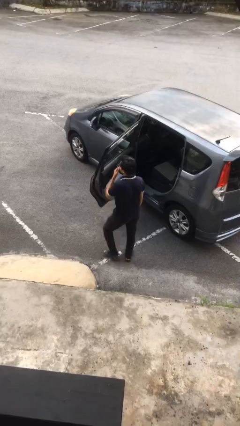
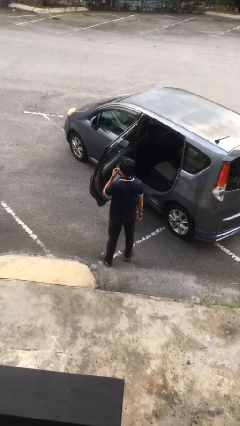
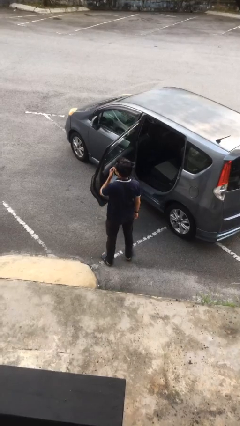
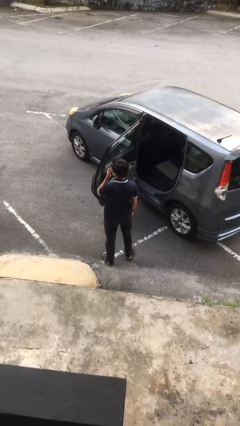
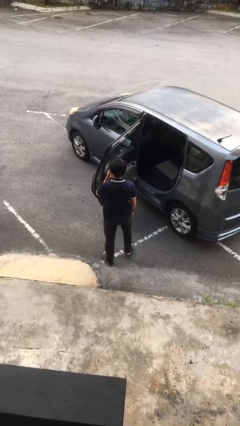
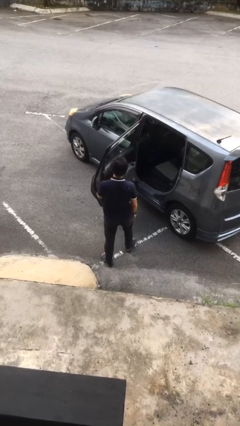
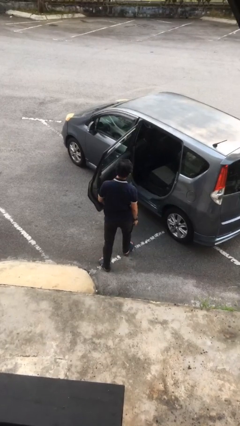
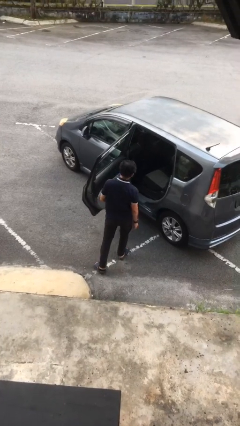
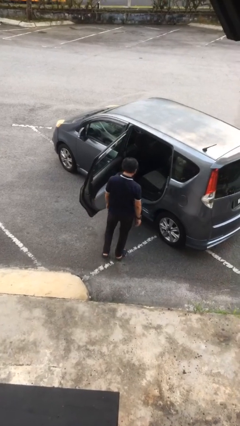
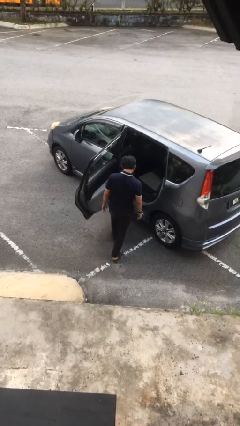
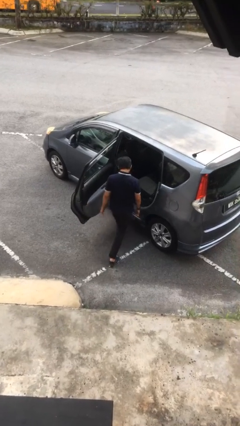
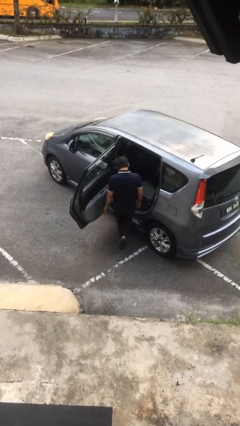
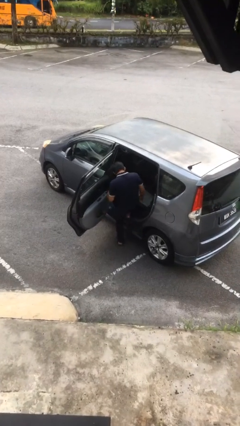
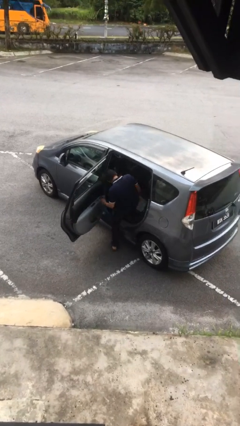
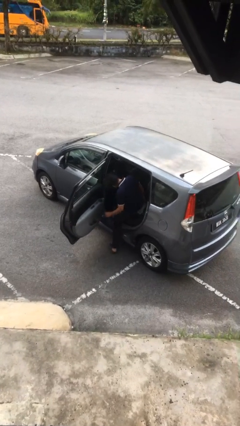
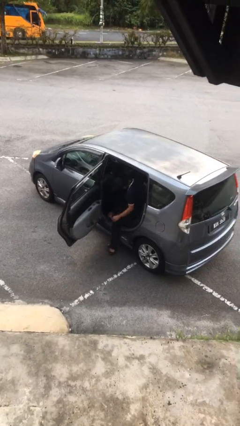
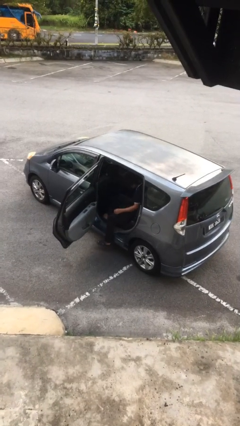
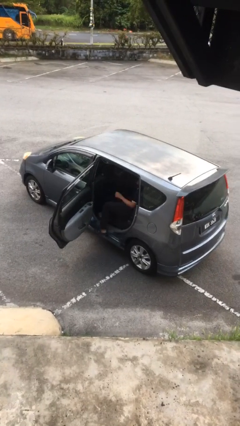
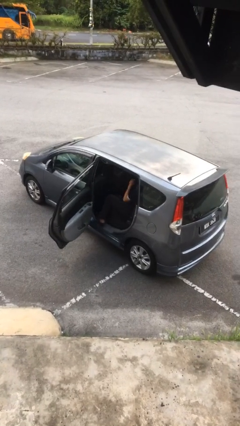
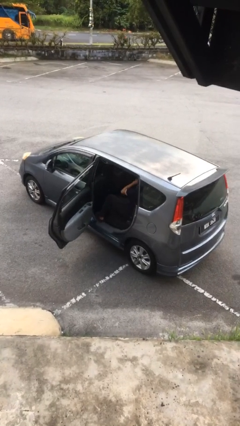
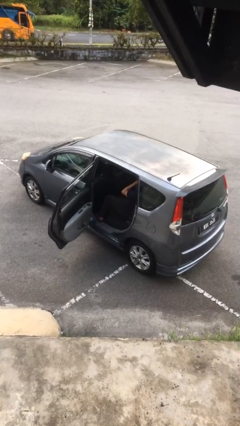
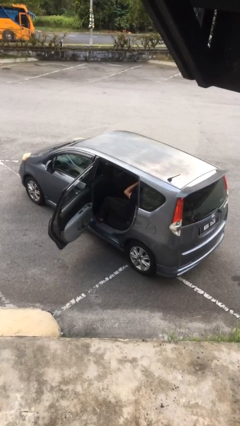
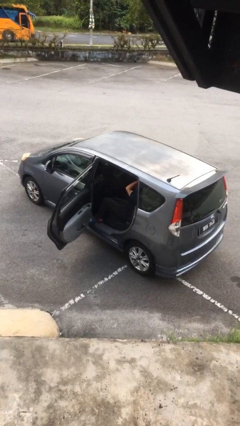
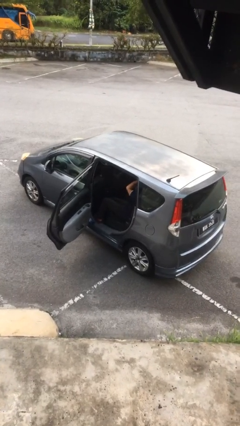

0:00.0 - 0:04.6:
person enters car

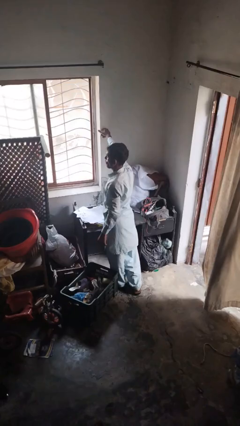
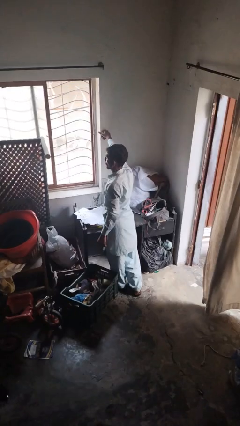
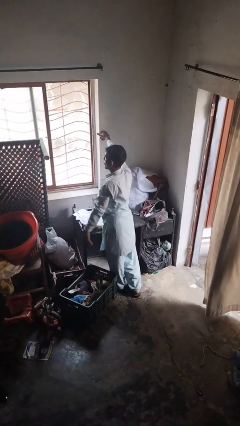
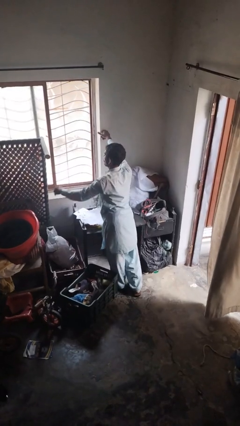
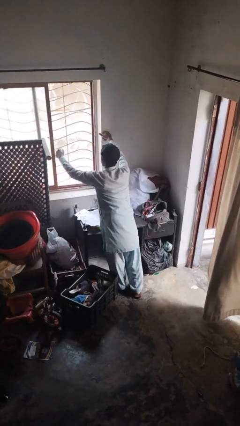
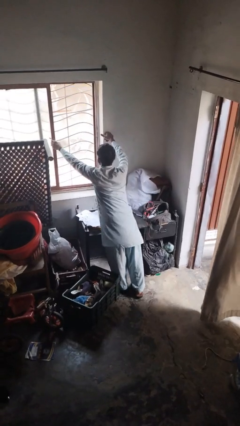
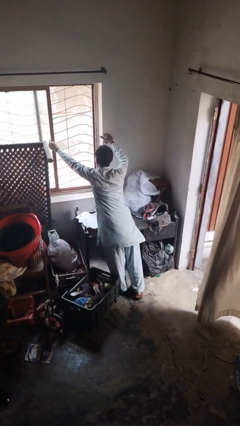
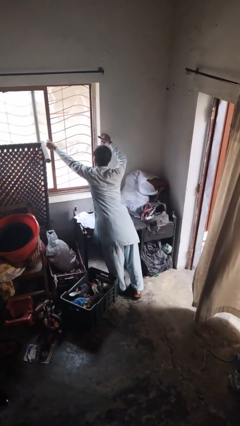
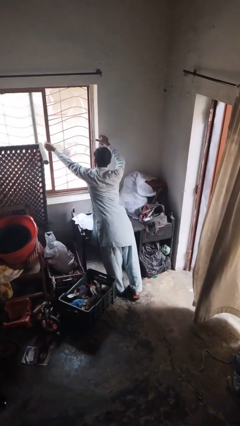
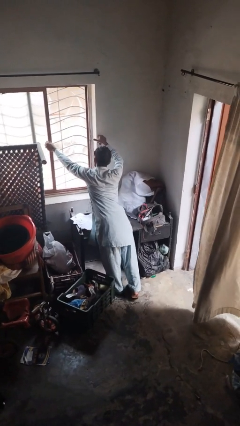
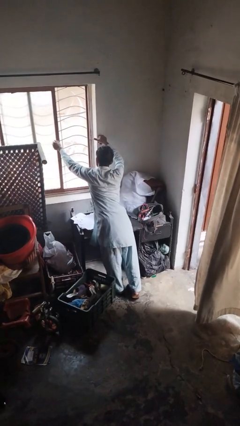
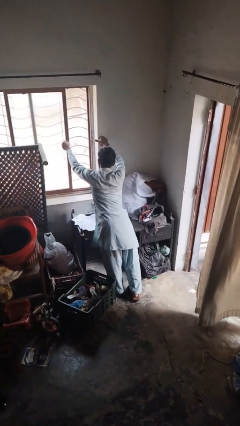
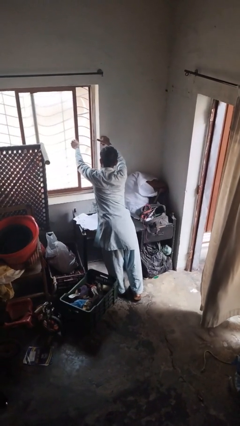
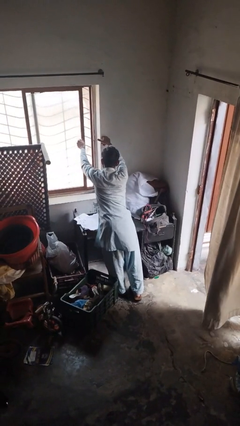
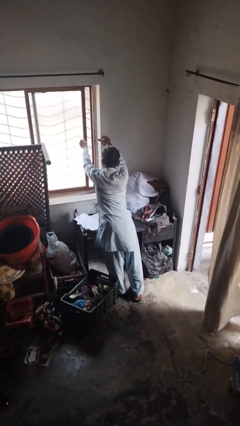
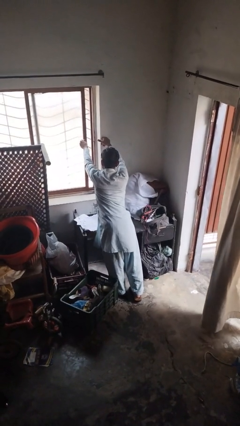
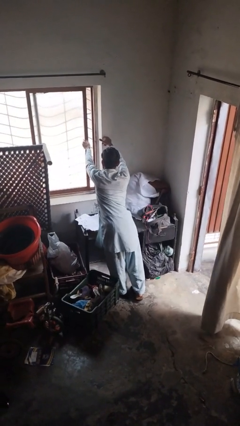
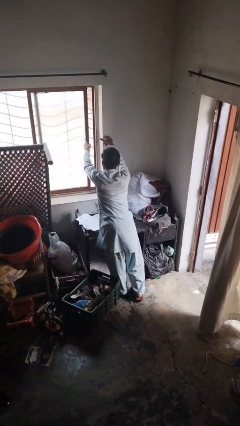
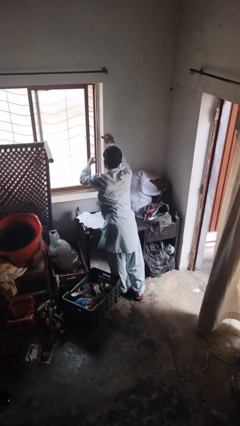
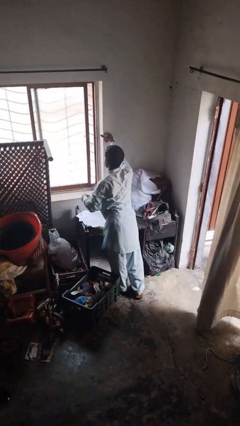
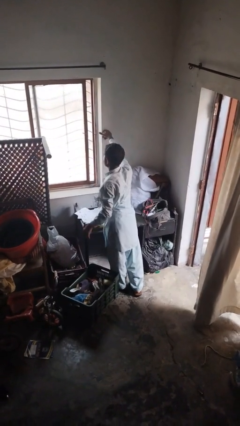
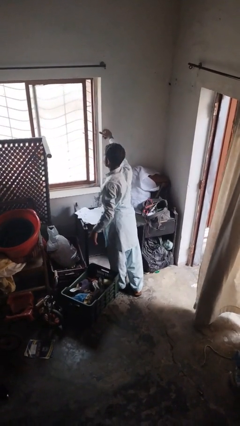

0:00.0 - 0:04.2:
person closes home window

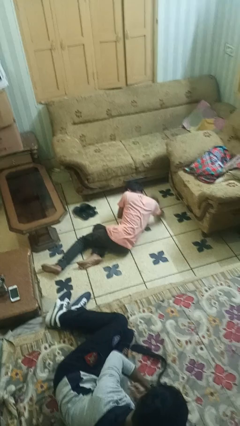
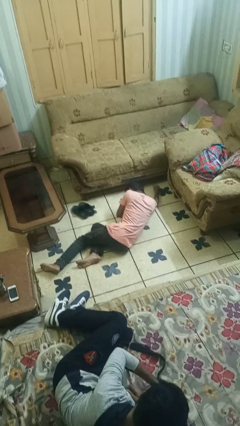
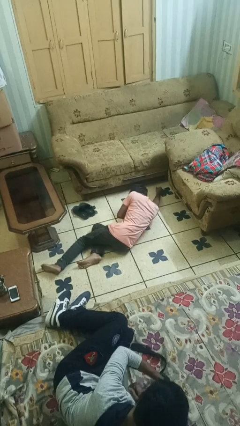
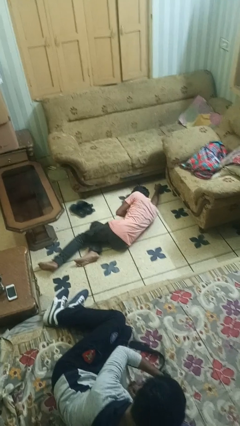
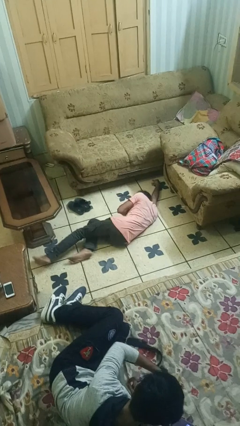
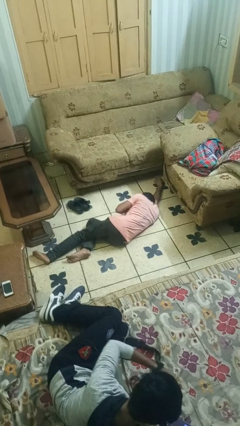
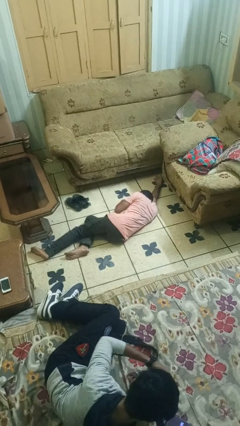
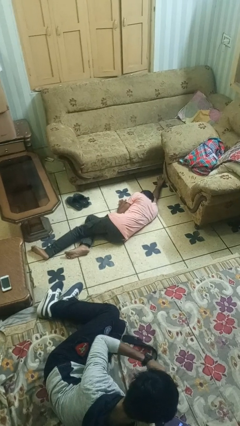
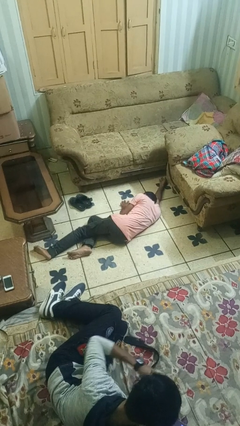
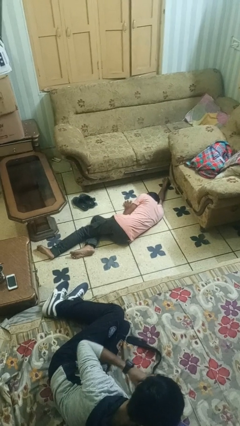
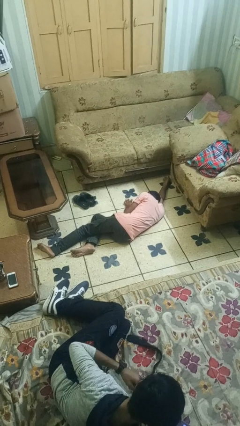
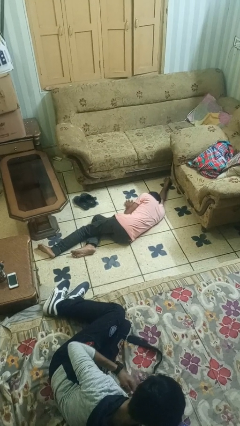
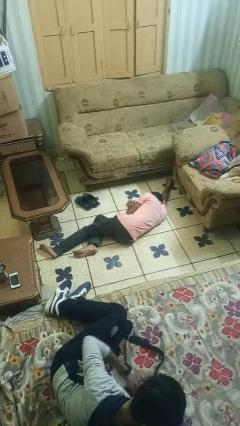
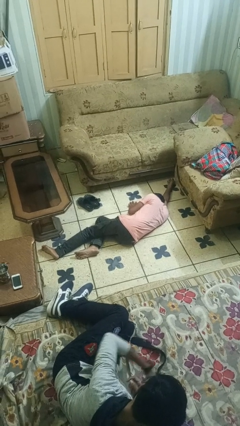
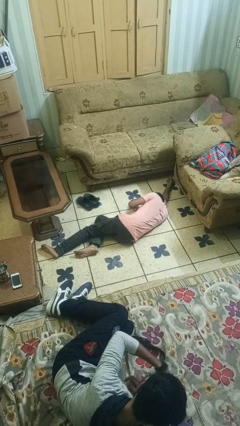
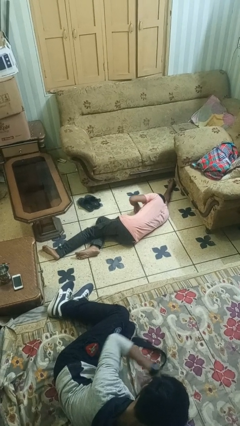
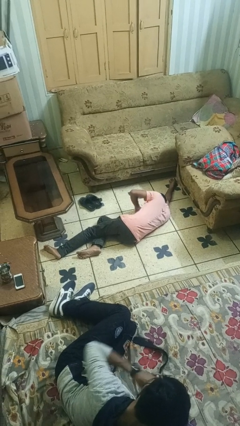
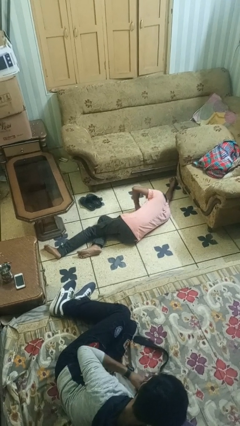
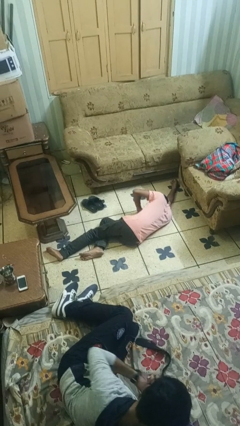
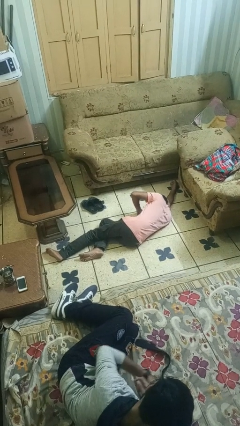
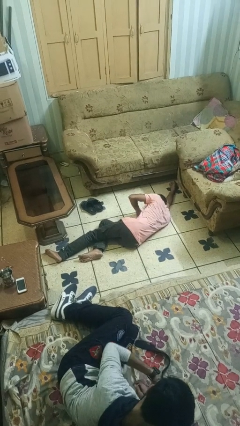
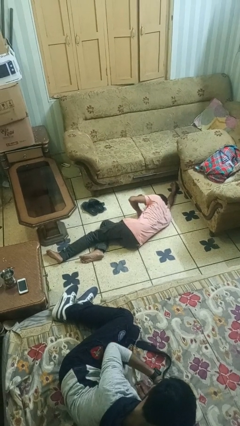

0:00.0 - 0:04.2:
person lies down on floor

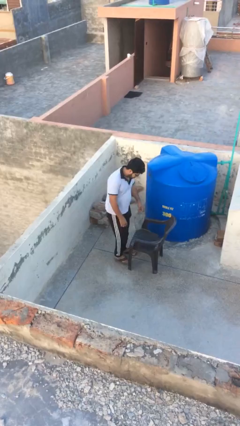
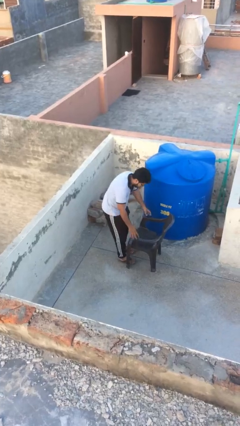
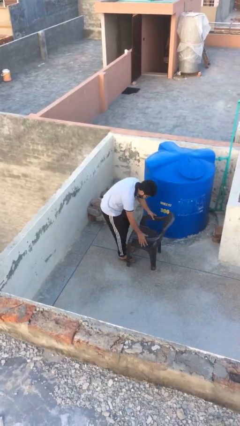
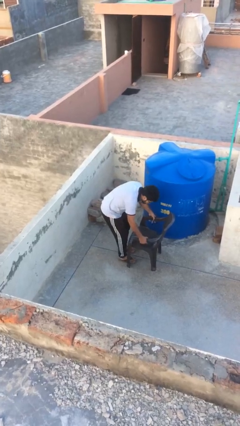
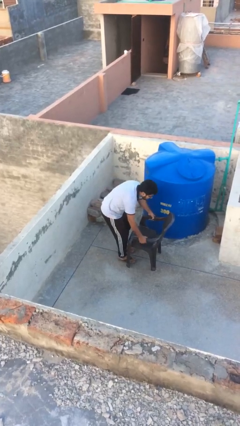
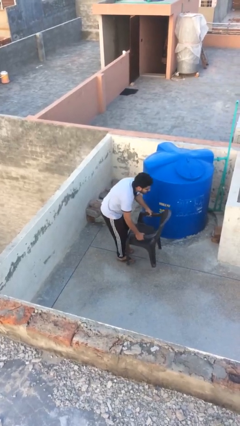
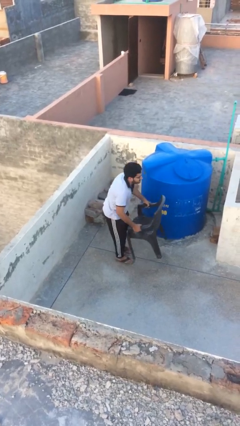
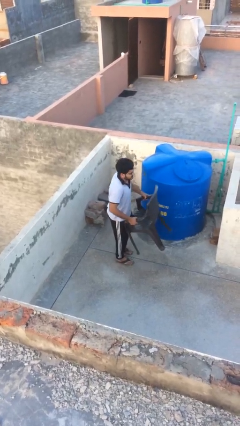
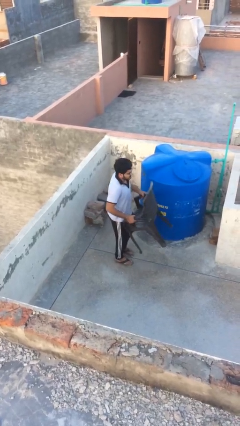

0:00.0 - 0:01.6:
person picks up object from floor

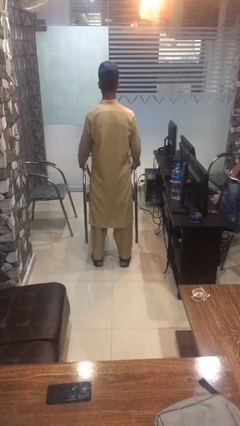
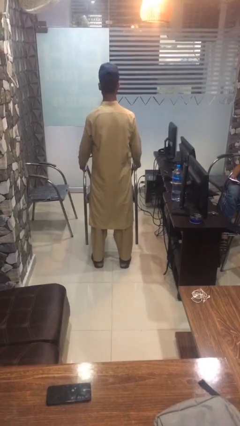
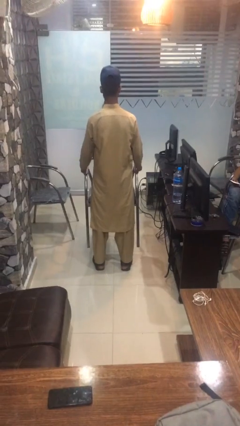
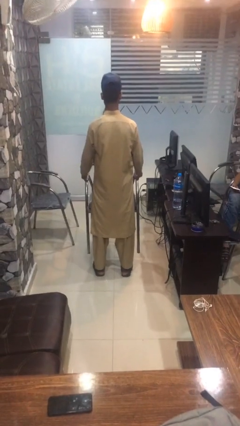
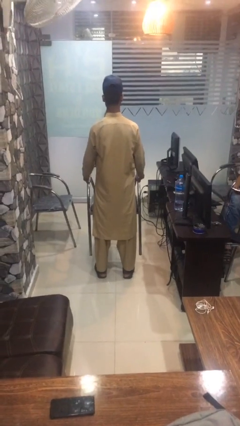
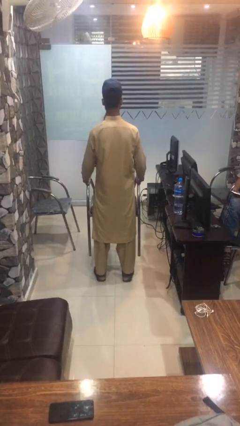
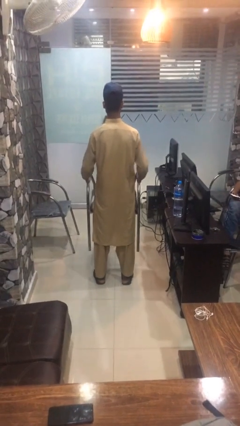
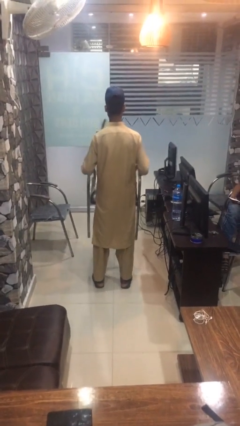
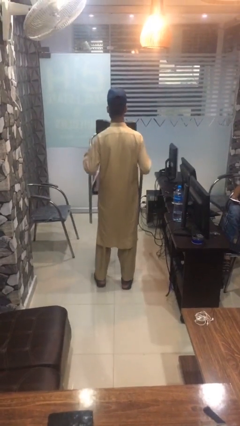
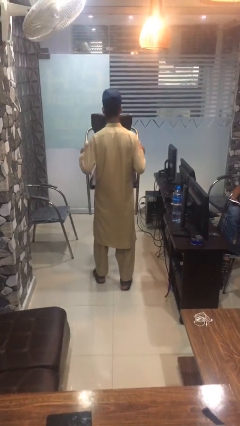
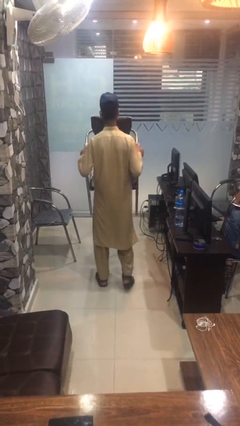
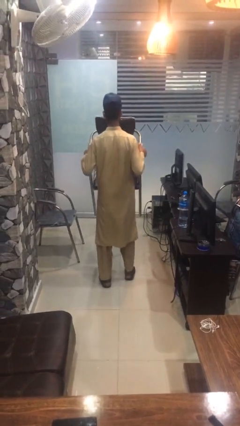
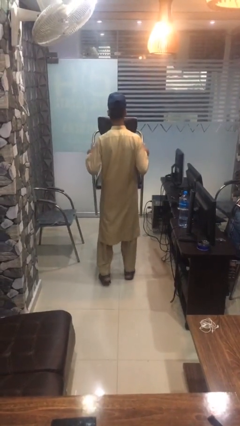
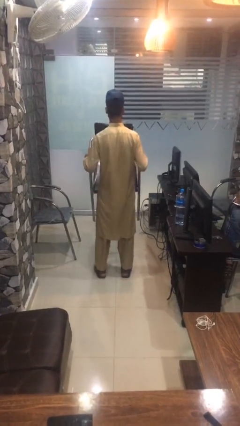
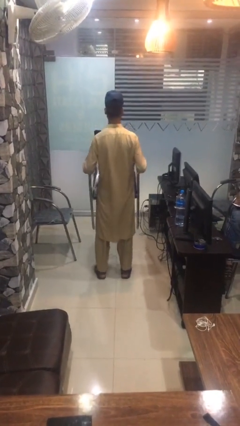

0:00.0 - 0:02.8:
person carries furniture

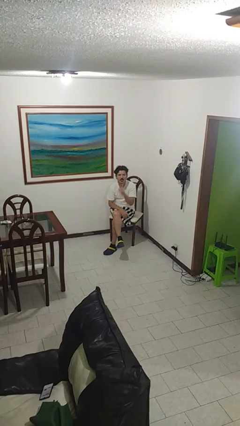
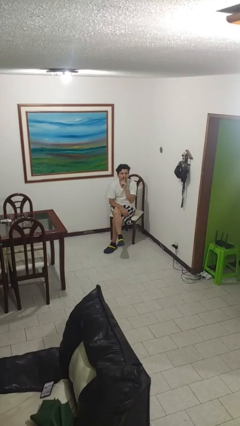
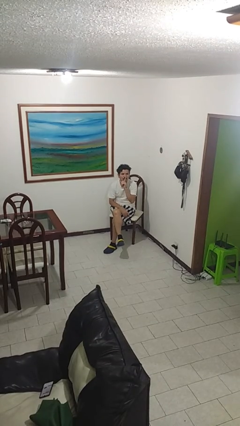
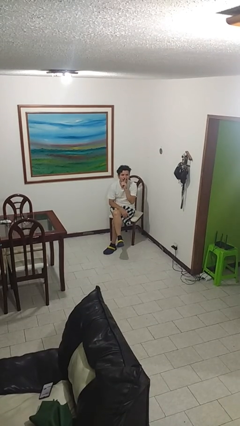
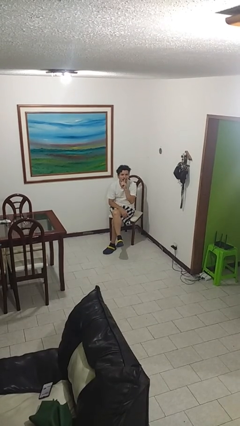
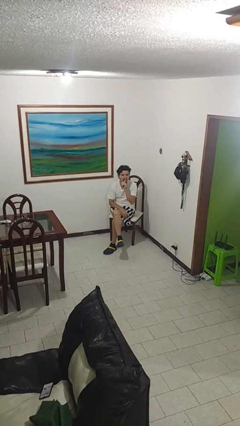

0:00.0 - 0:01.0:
person gestures be quiet
